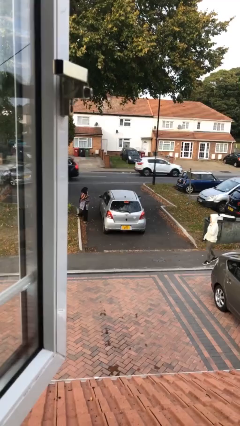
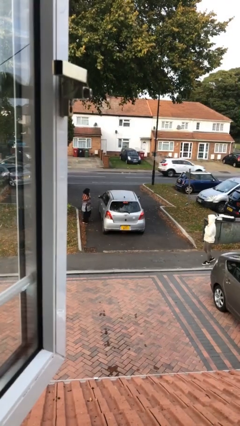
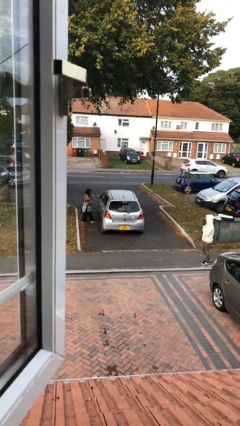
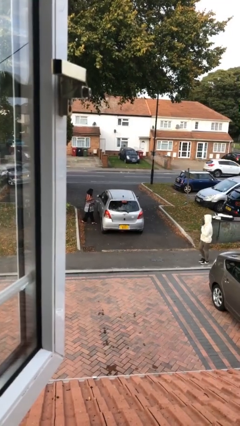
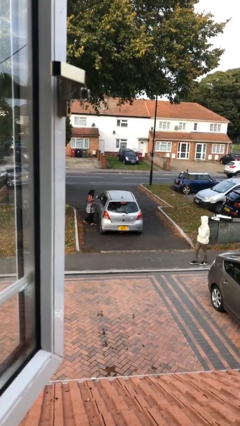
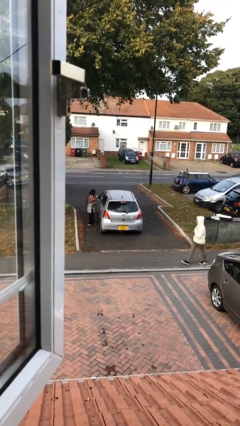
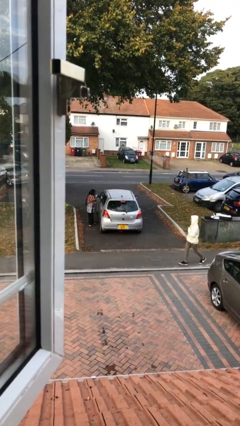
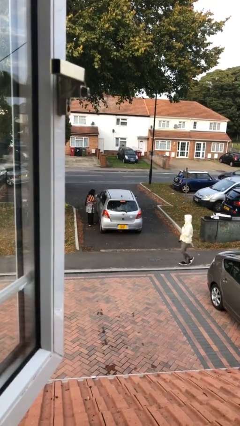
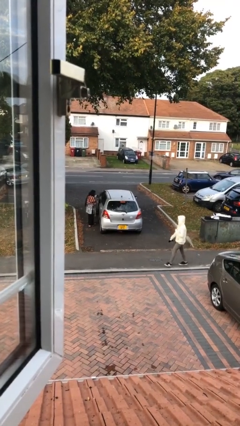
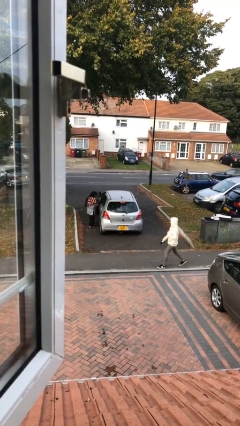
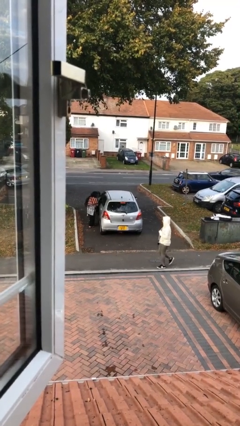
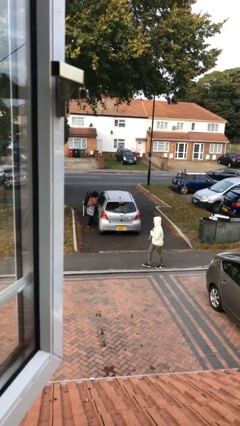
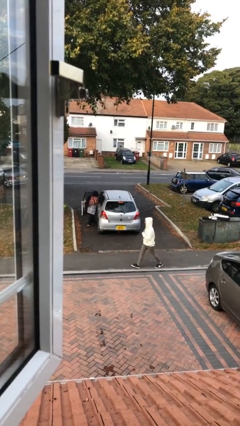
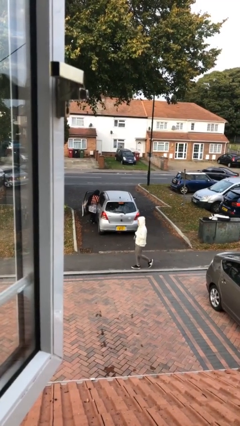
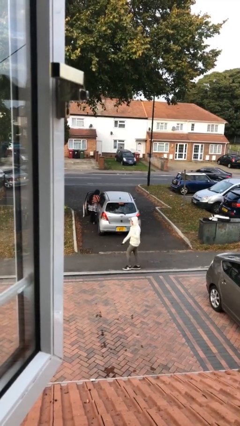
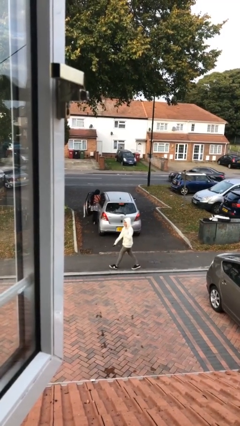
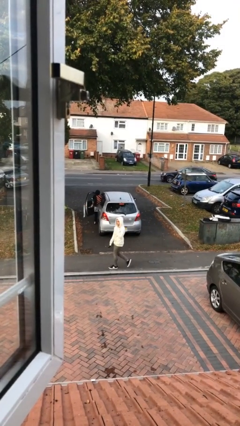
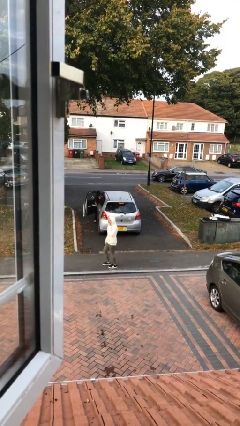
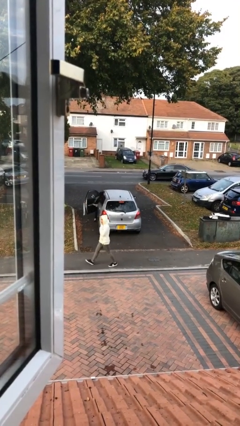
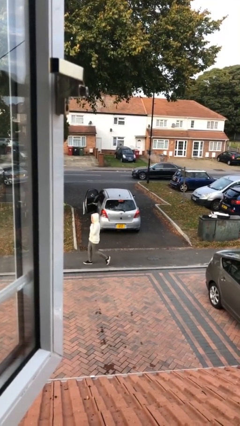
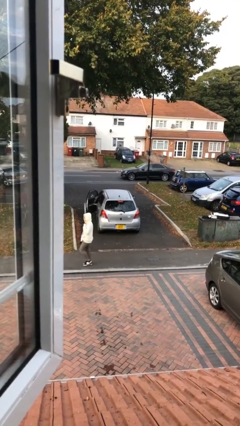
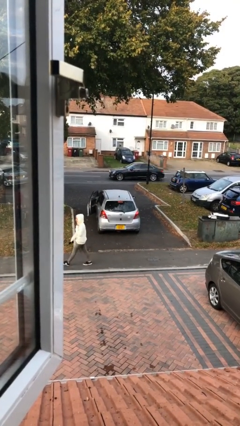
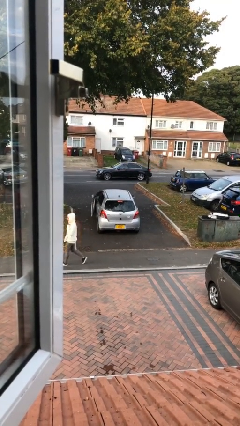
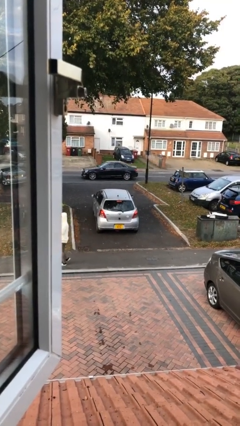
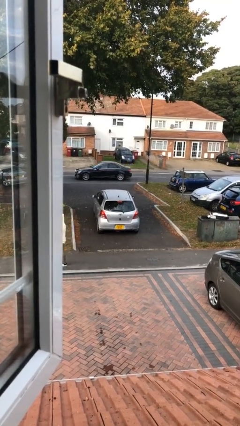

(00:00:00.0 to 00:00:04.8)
car picks up person

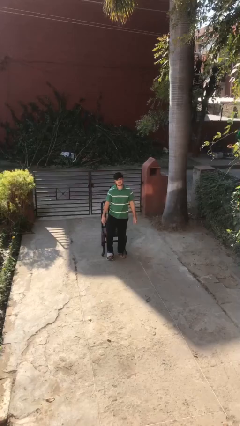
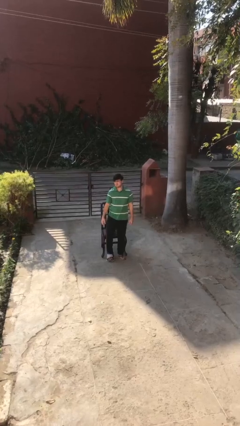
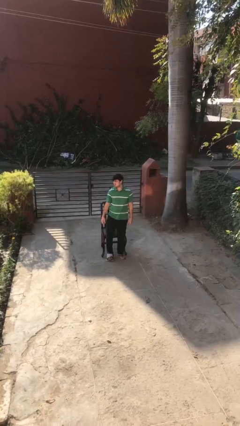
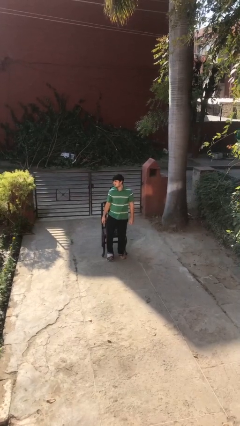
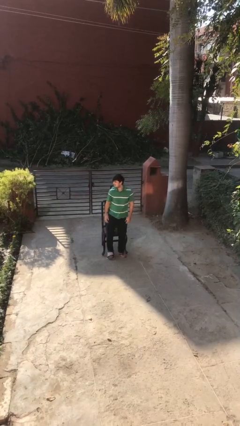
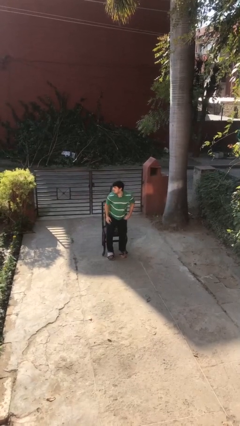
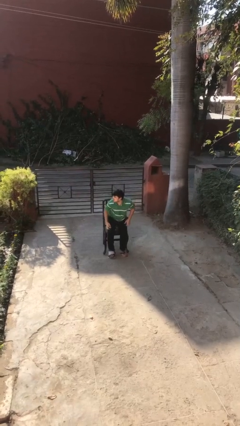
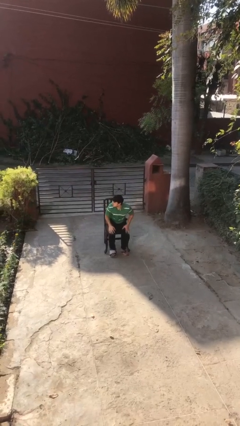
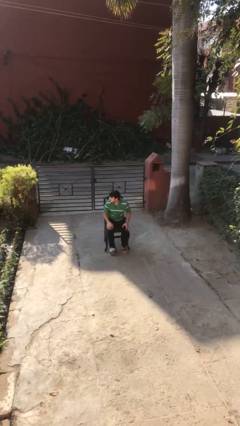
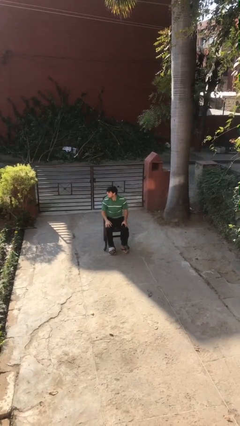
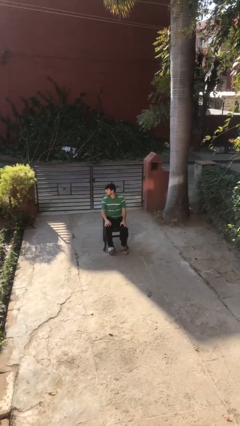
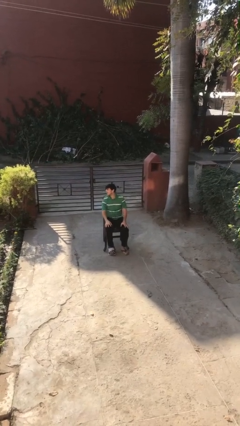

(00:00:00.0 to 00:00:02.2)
person sits down

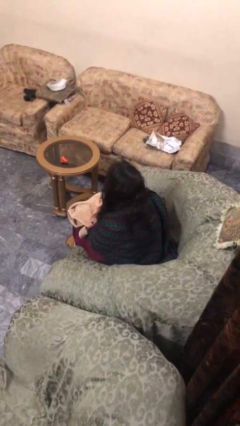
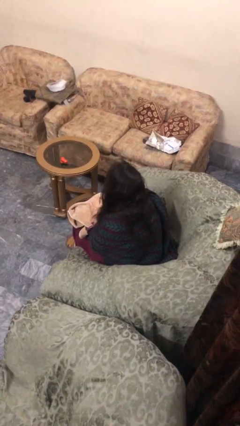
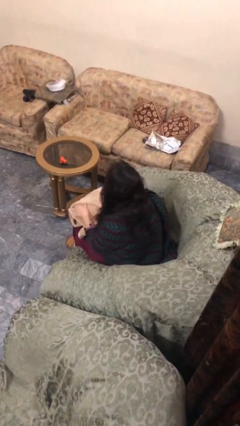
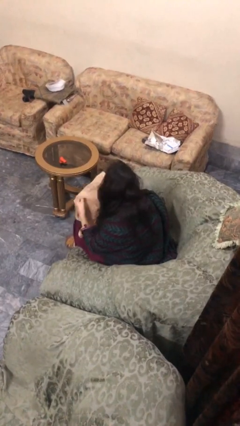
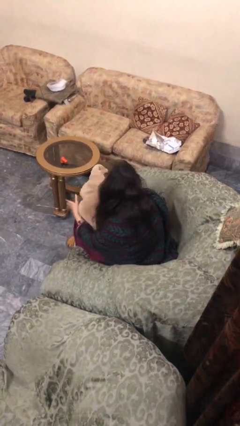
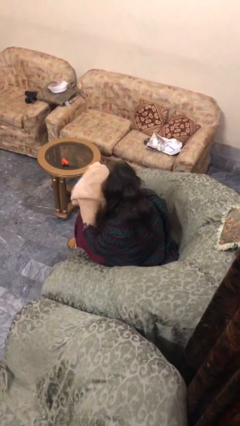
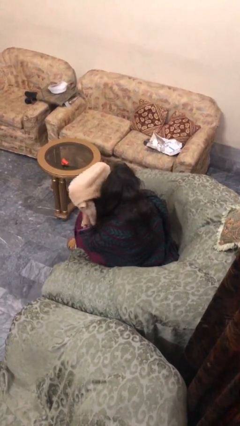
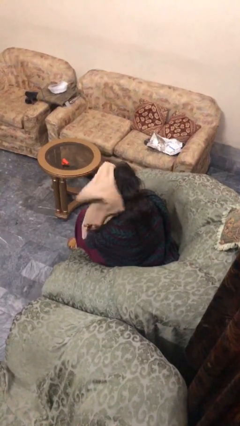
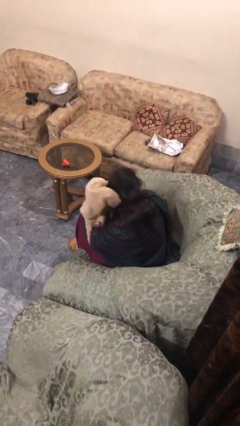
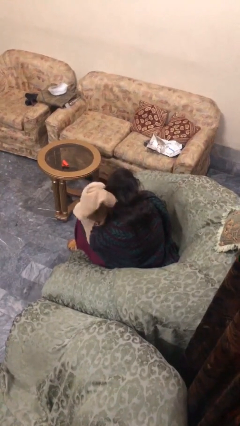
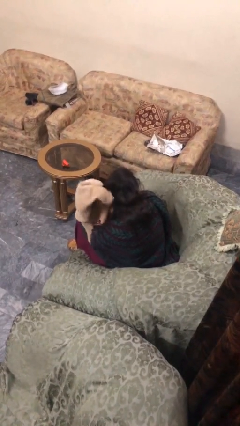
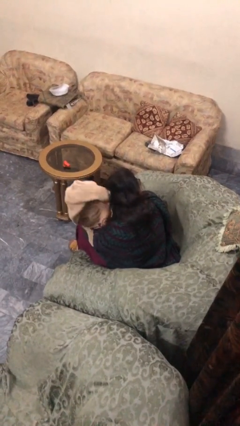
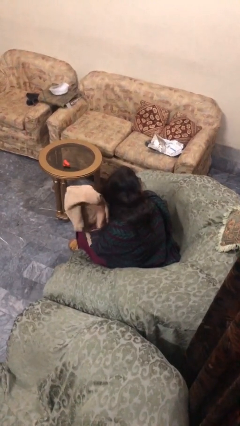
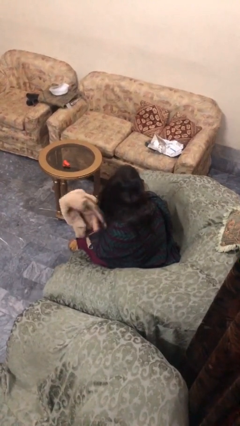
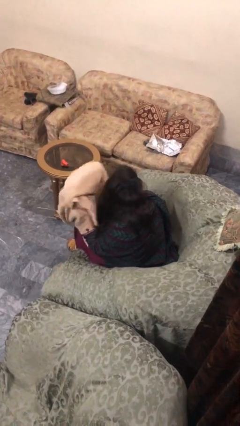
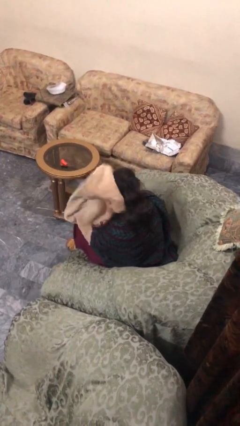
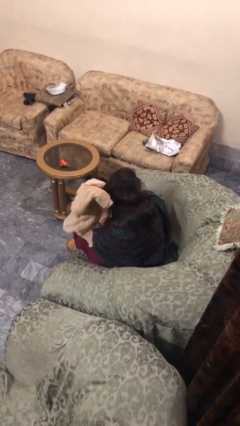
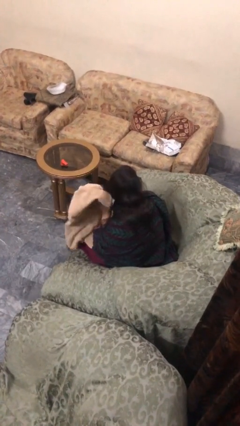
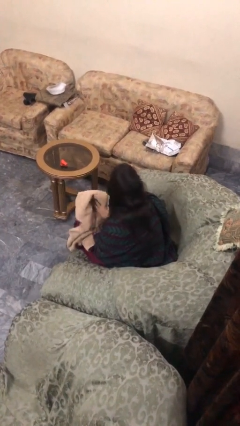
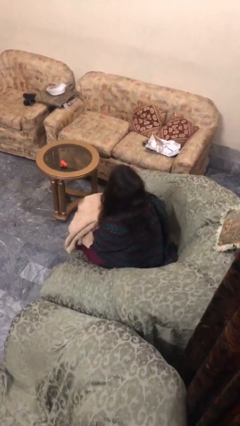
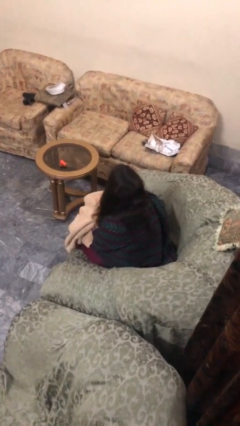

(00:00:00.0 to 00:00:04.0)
person dries hair with towel

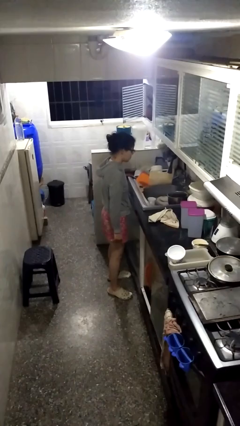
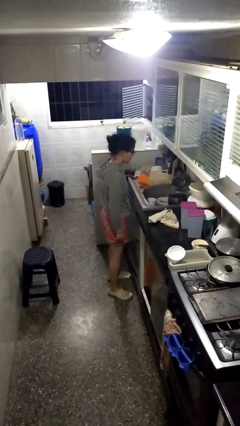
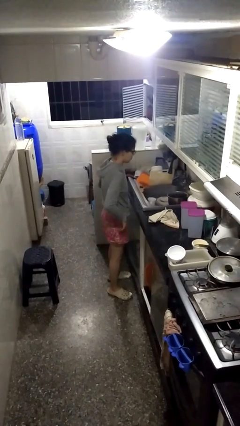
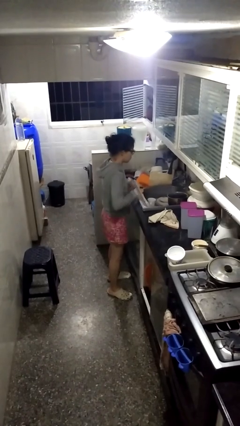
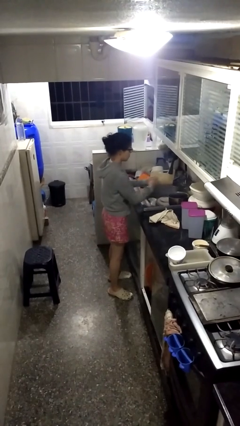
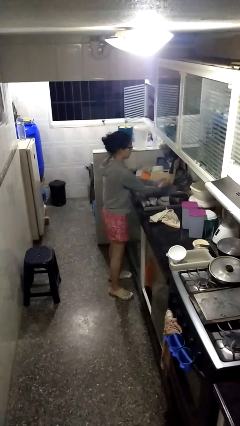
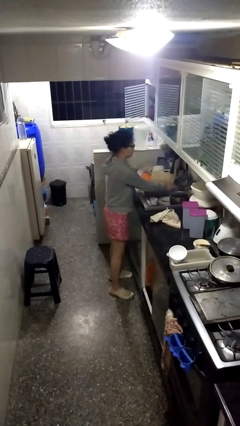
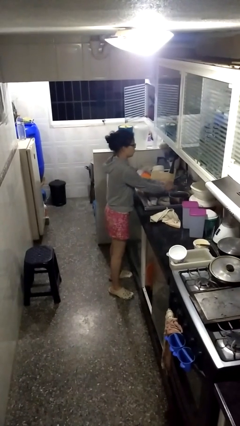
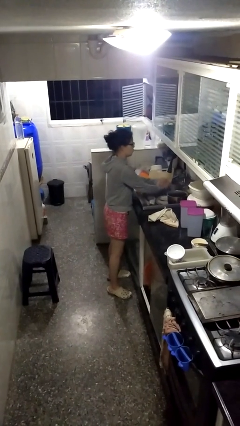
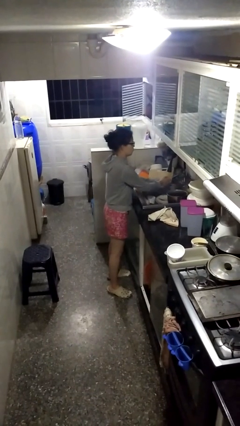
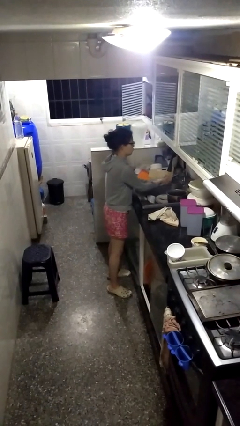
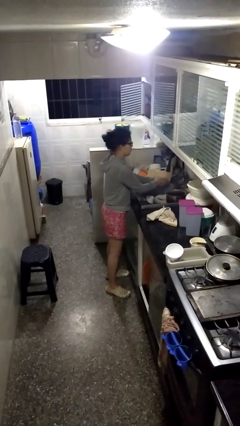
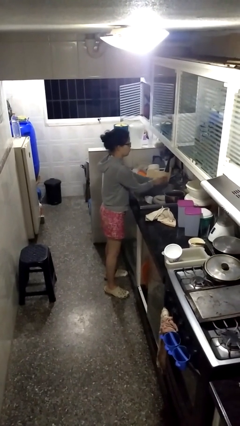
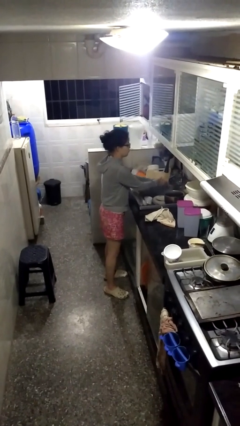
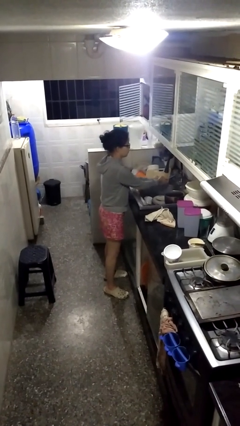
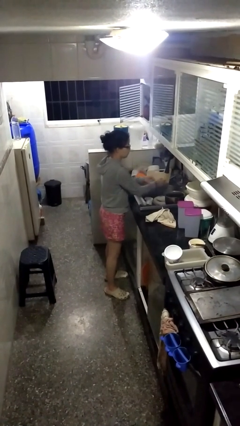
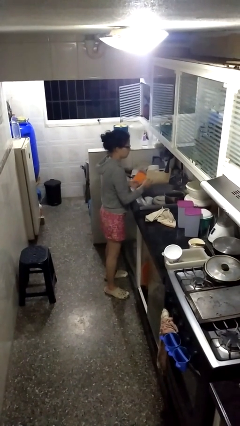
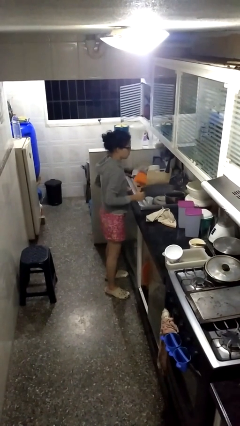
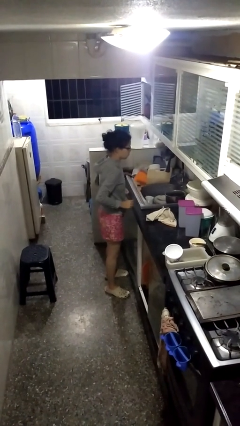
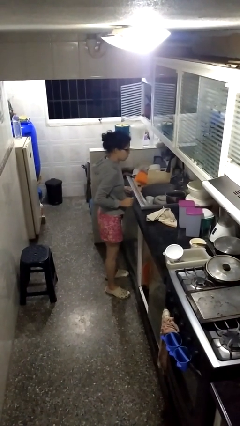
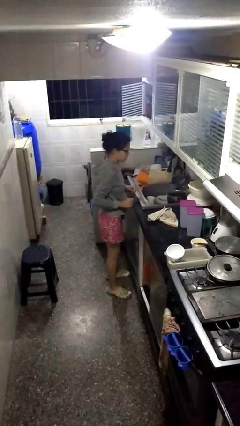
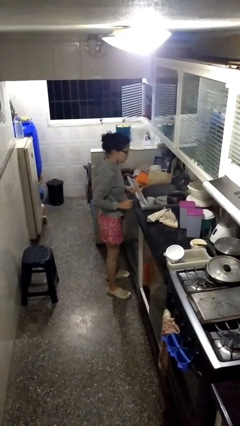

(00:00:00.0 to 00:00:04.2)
person washes hands

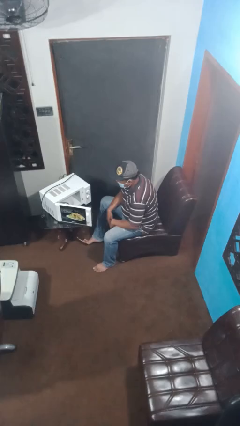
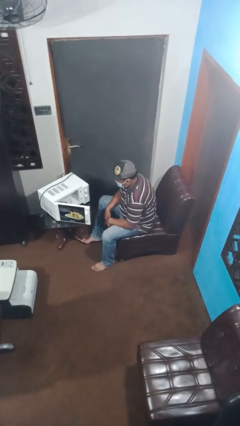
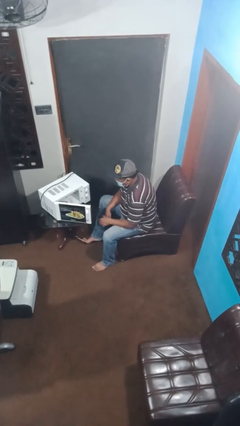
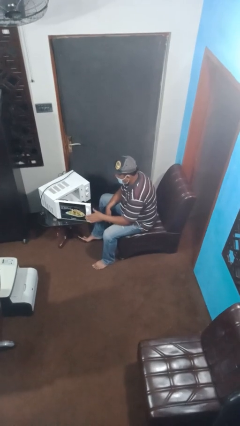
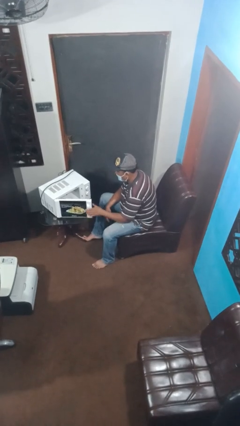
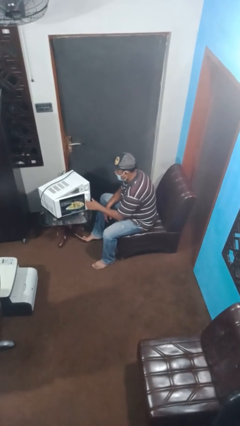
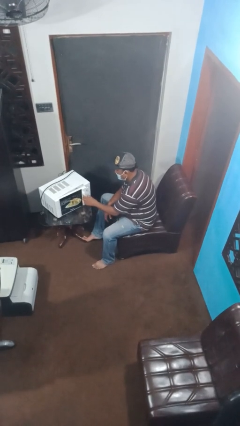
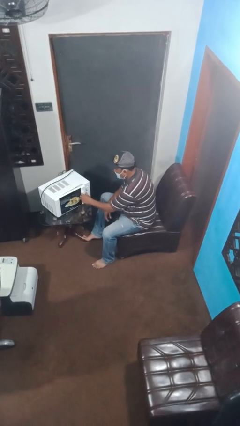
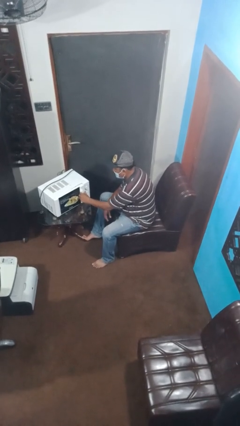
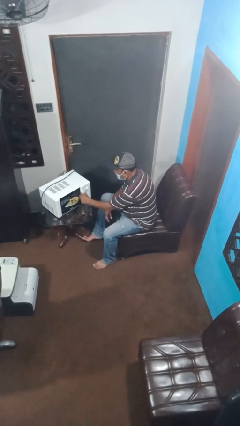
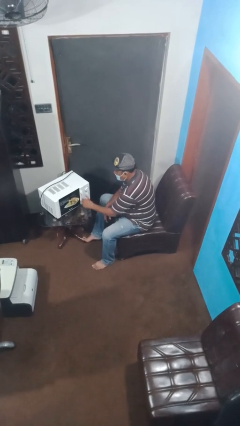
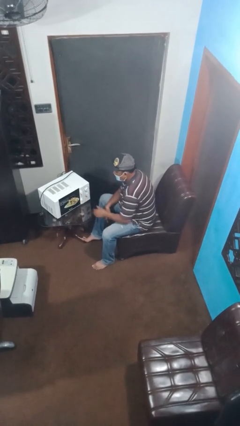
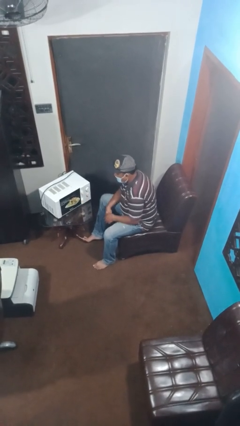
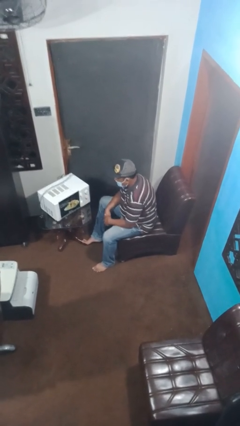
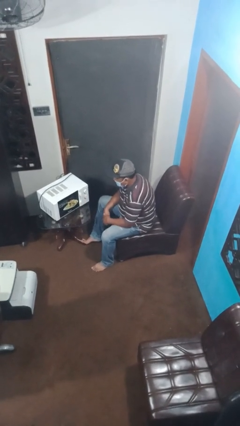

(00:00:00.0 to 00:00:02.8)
person closes microwave
